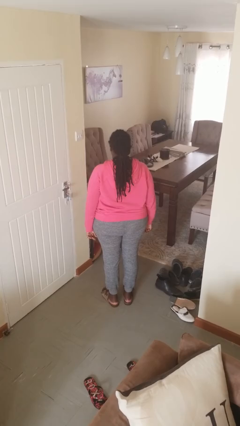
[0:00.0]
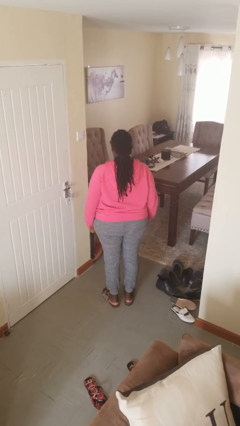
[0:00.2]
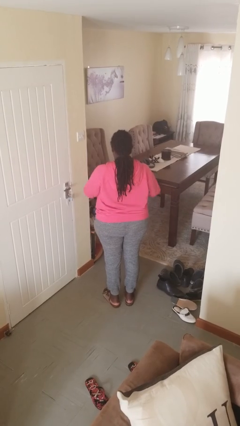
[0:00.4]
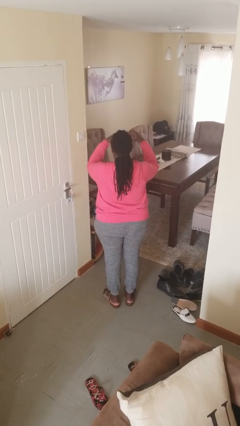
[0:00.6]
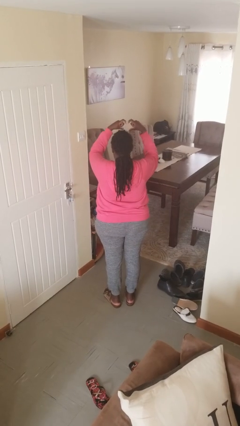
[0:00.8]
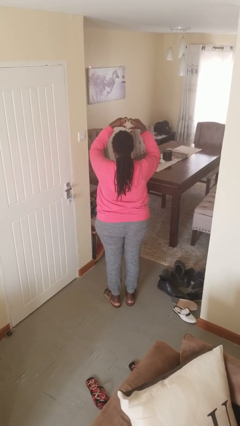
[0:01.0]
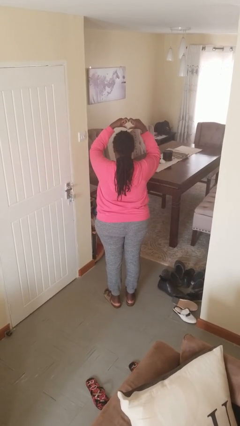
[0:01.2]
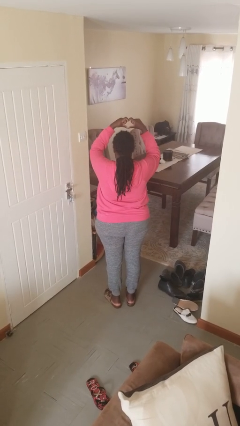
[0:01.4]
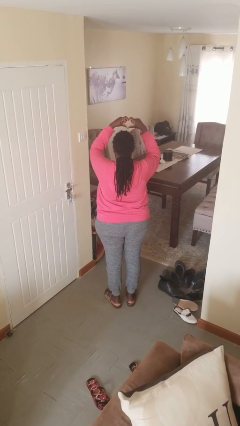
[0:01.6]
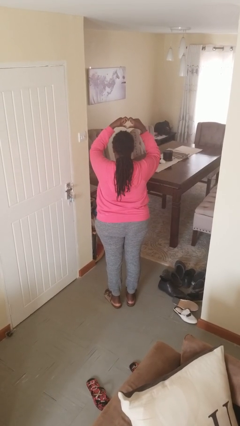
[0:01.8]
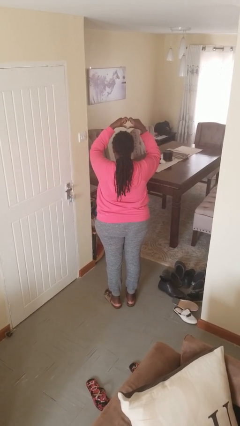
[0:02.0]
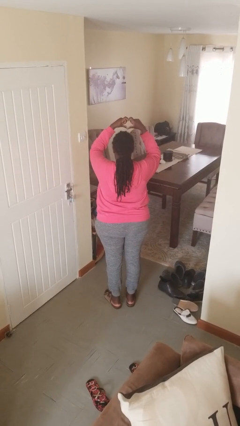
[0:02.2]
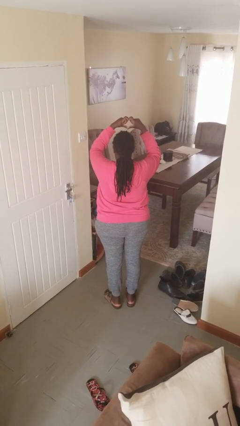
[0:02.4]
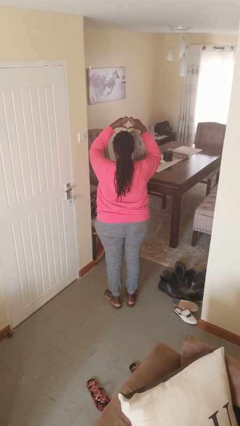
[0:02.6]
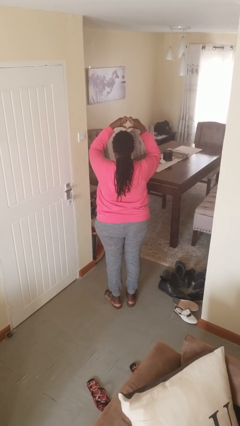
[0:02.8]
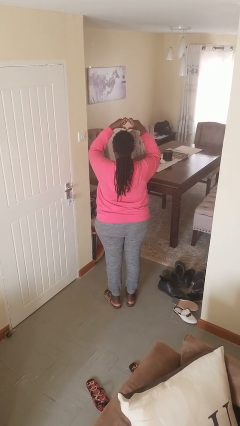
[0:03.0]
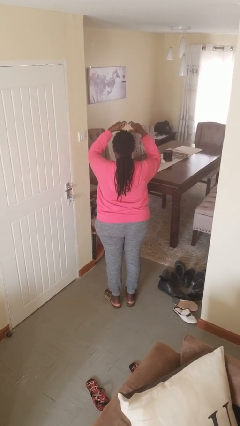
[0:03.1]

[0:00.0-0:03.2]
person gestures heart

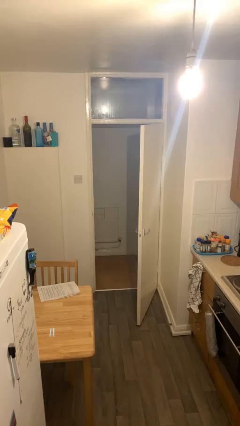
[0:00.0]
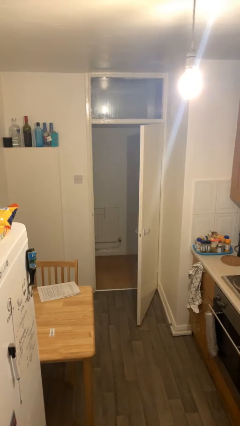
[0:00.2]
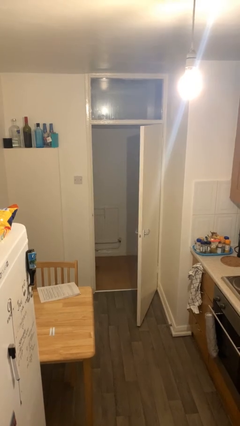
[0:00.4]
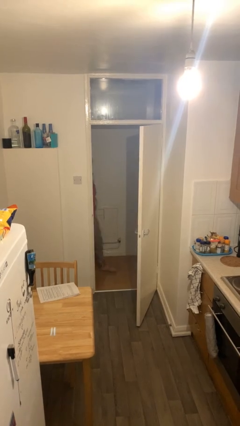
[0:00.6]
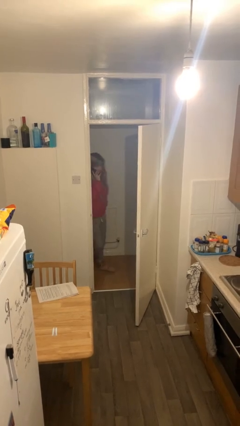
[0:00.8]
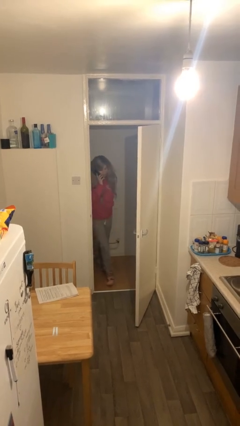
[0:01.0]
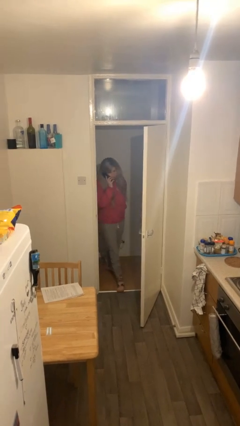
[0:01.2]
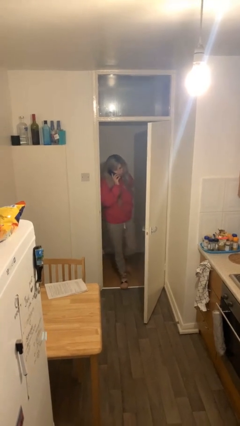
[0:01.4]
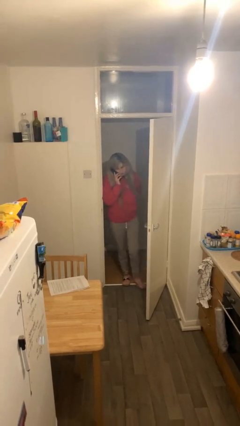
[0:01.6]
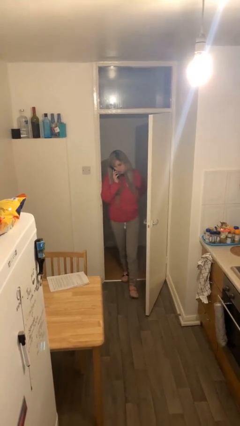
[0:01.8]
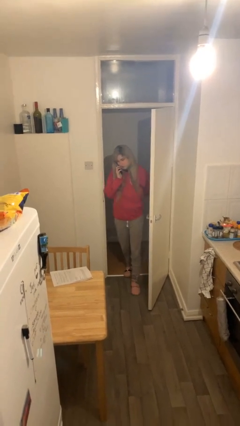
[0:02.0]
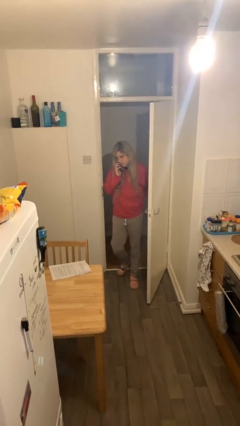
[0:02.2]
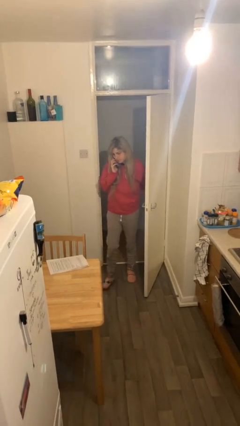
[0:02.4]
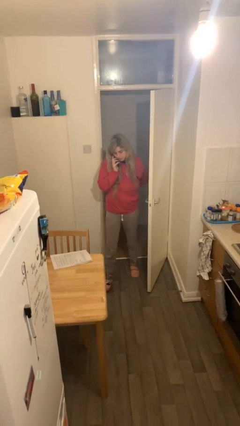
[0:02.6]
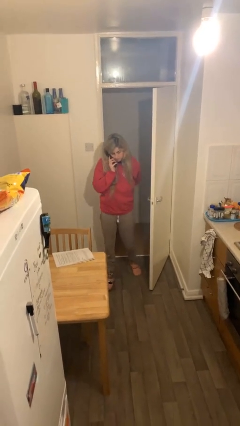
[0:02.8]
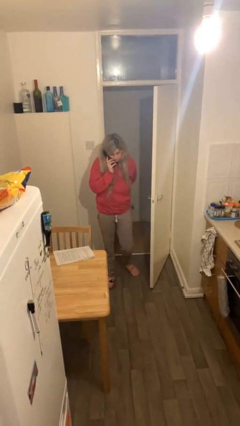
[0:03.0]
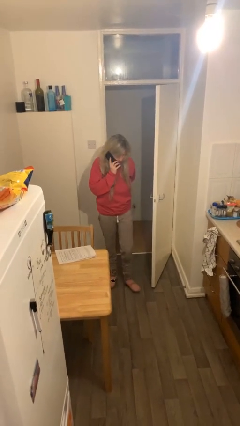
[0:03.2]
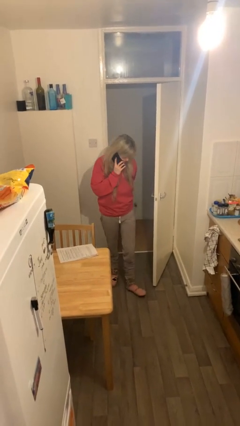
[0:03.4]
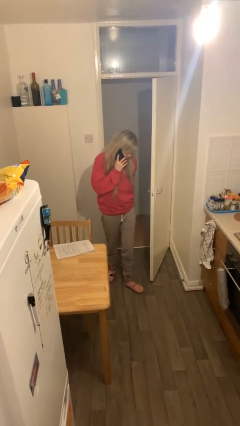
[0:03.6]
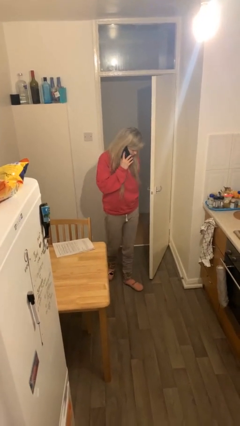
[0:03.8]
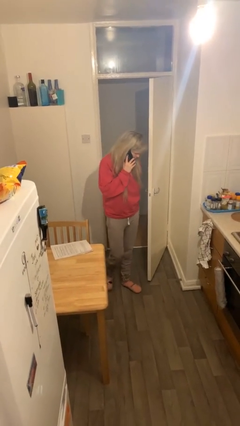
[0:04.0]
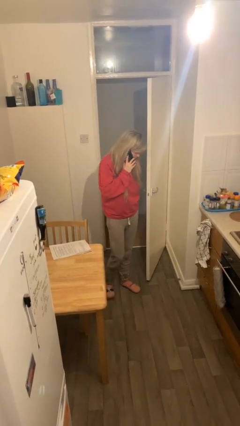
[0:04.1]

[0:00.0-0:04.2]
person enters scene through structure

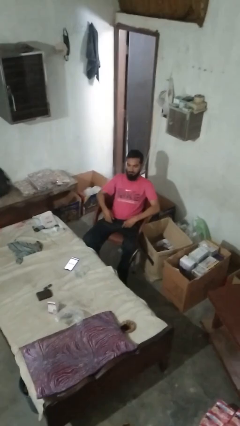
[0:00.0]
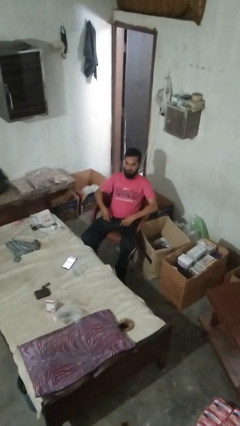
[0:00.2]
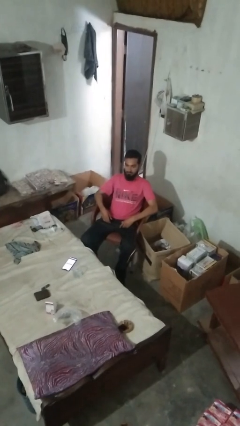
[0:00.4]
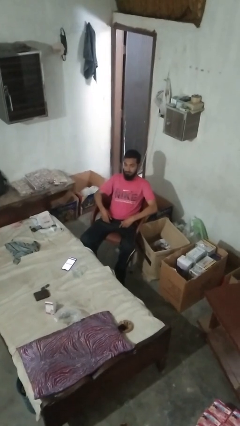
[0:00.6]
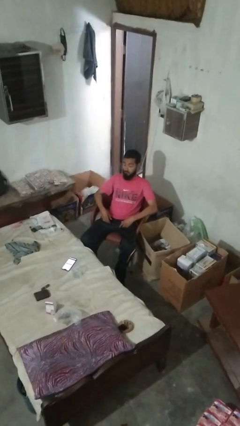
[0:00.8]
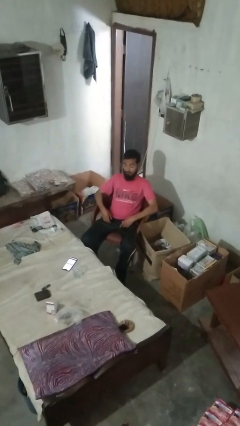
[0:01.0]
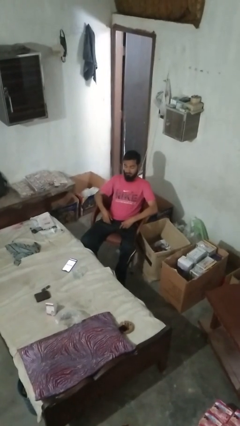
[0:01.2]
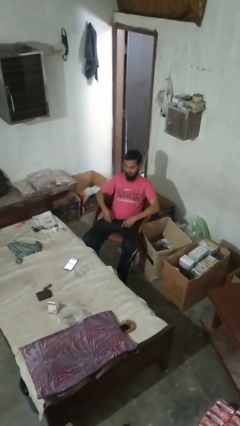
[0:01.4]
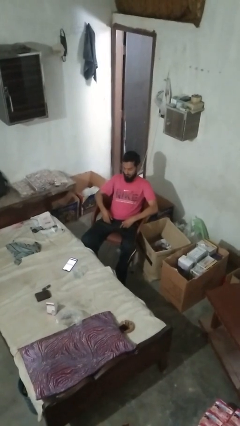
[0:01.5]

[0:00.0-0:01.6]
person shakes head

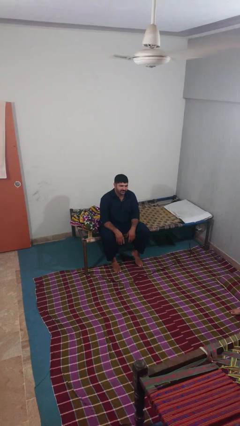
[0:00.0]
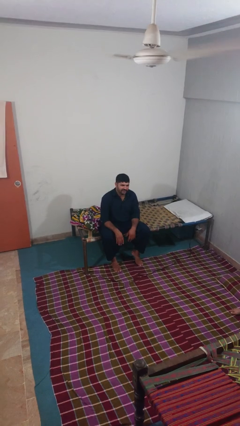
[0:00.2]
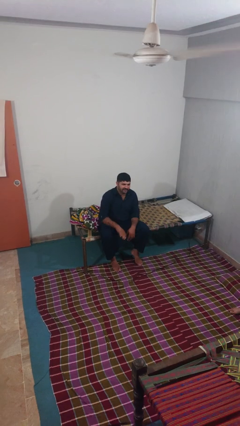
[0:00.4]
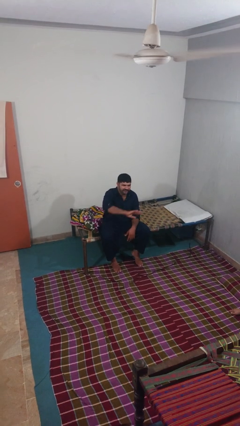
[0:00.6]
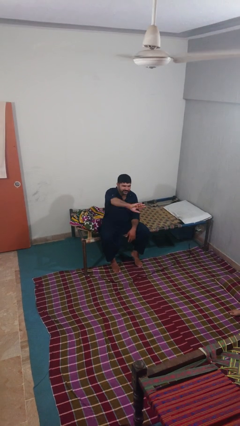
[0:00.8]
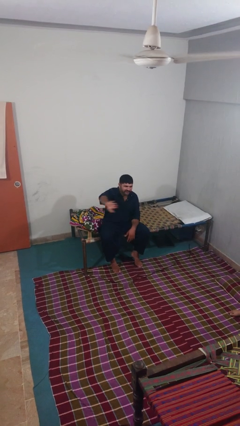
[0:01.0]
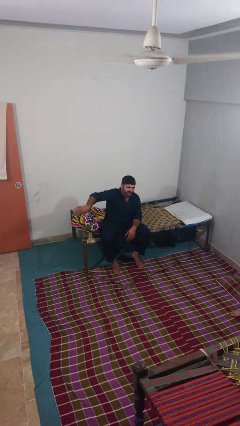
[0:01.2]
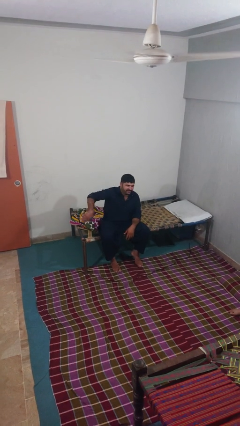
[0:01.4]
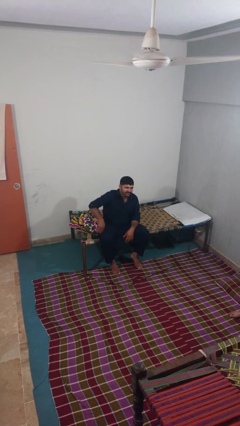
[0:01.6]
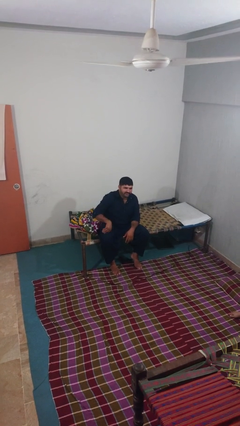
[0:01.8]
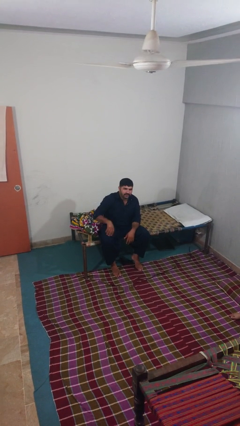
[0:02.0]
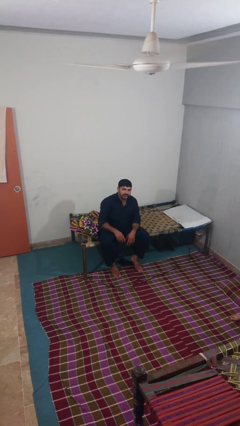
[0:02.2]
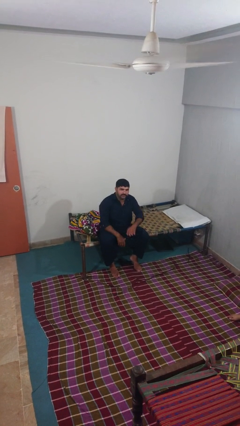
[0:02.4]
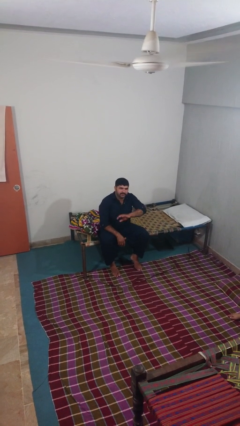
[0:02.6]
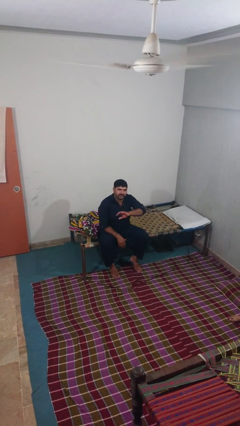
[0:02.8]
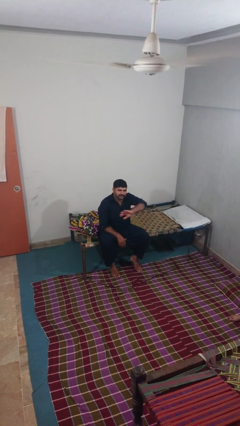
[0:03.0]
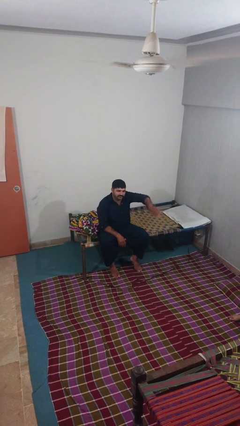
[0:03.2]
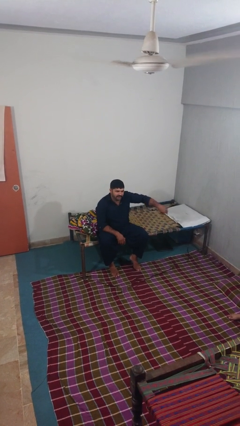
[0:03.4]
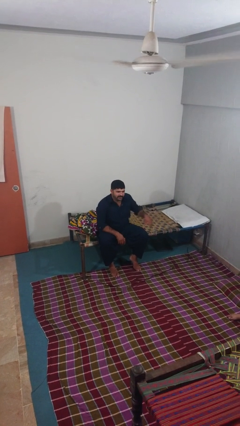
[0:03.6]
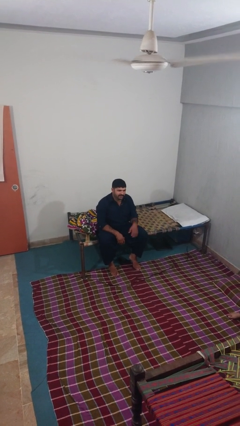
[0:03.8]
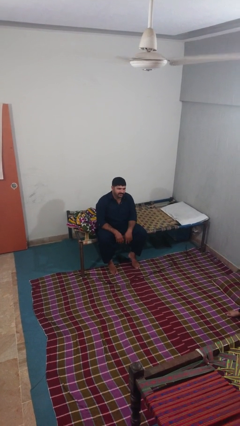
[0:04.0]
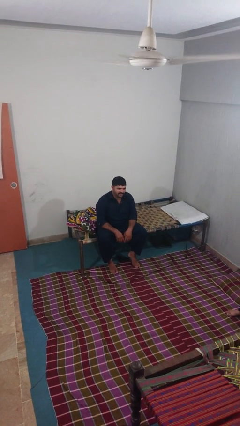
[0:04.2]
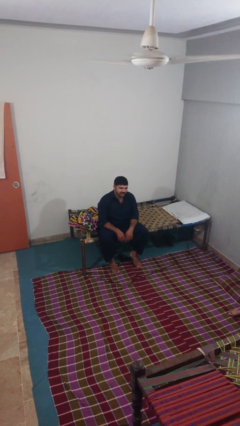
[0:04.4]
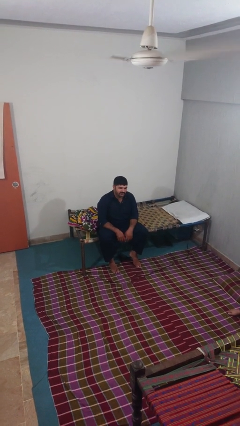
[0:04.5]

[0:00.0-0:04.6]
person gestures swipe left

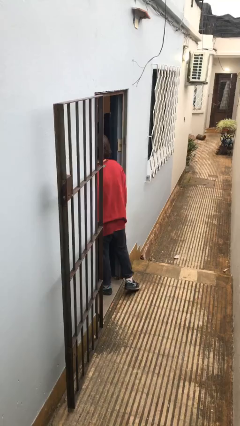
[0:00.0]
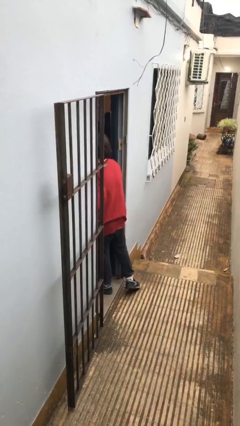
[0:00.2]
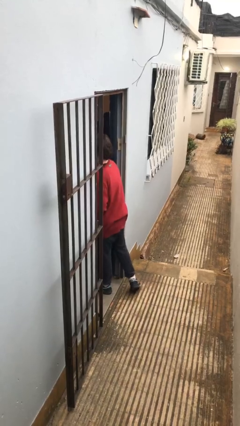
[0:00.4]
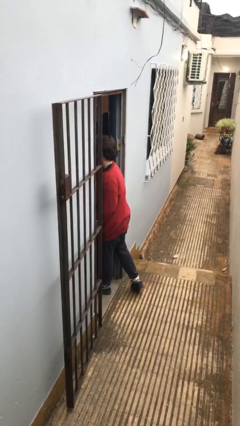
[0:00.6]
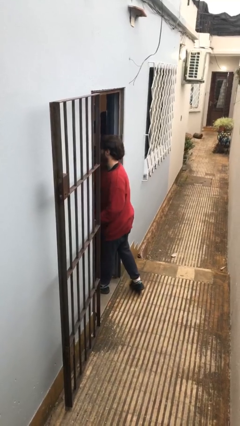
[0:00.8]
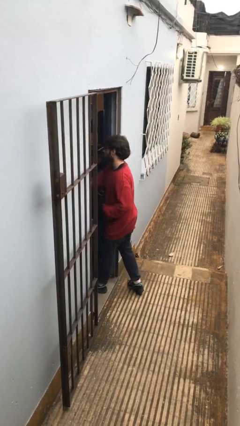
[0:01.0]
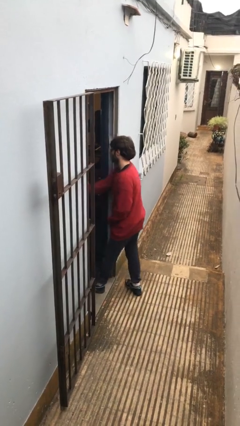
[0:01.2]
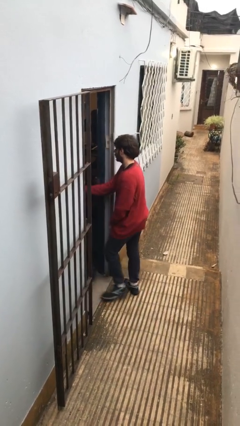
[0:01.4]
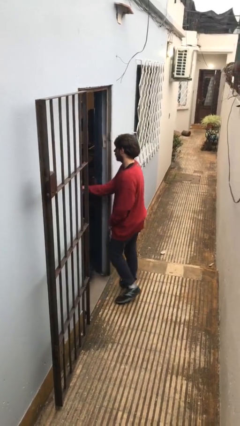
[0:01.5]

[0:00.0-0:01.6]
person closes facility door

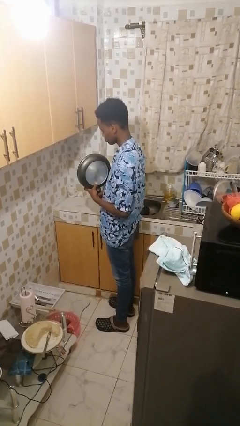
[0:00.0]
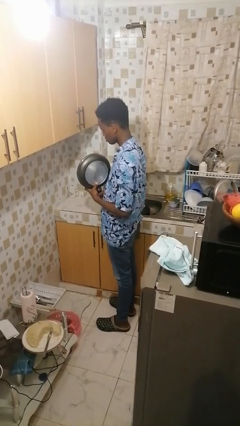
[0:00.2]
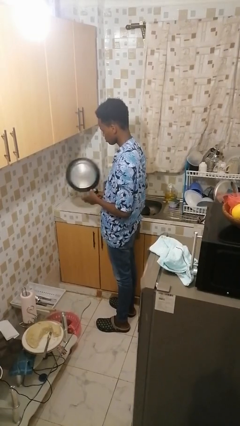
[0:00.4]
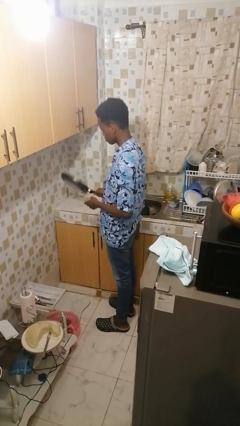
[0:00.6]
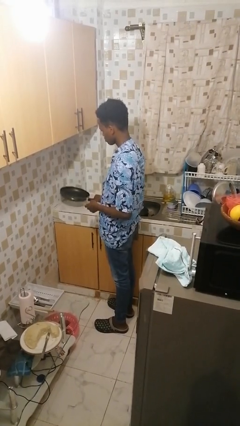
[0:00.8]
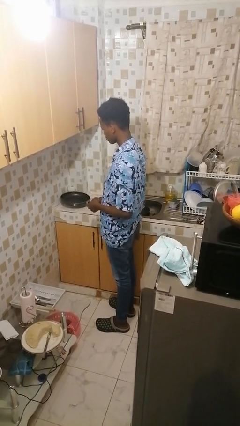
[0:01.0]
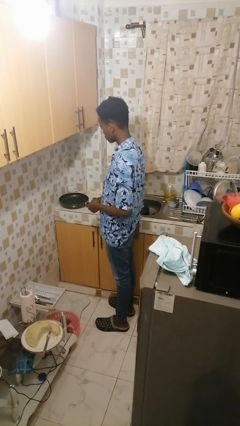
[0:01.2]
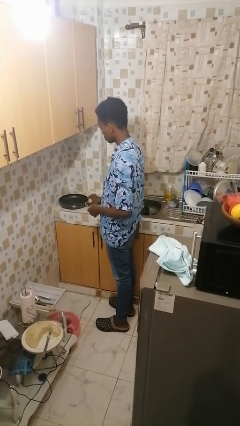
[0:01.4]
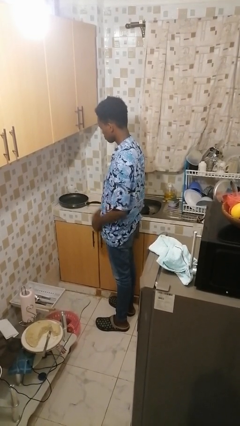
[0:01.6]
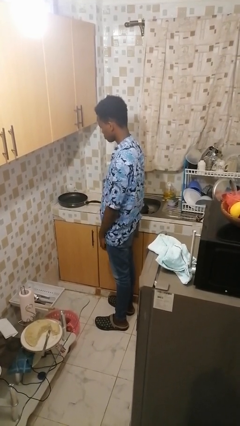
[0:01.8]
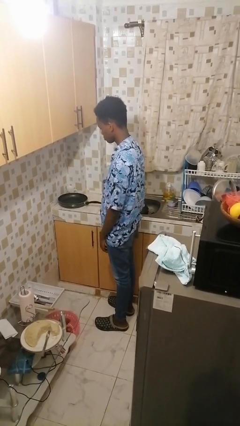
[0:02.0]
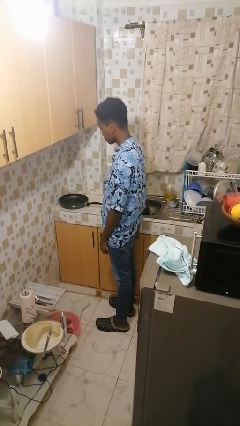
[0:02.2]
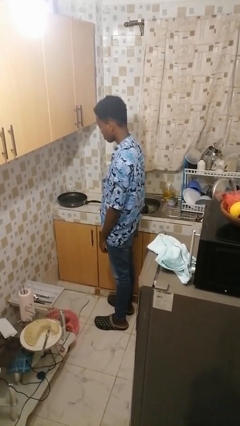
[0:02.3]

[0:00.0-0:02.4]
person puts down object on countertop

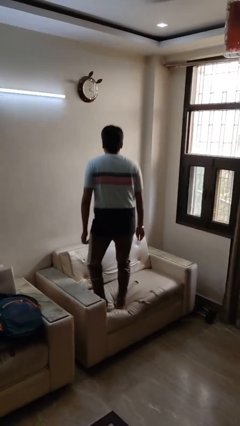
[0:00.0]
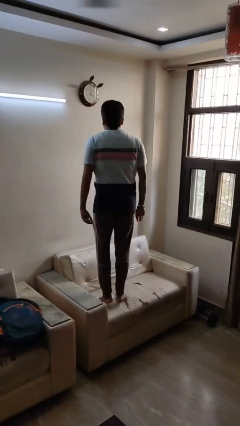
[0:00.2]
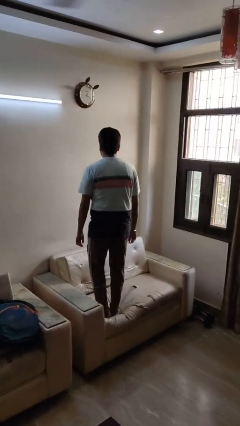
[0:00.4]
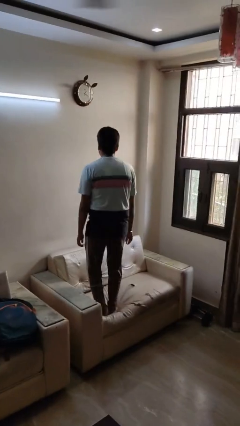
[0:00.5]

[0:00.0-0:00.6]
person jumps on couch
